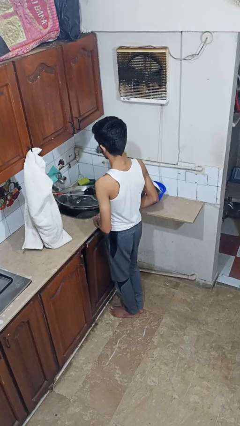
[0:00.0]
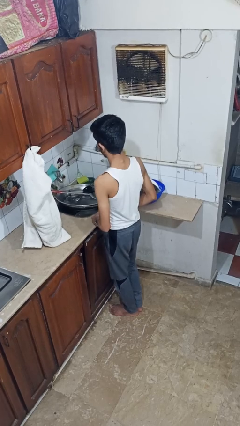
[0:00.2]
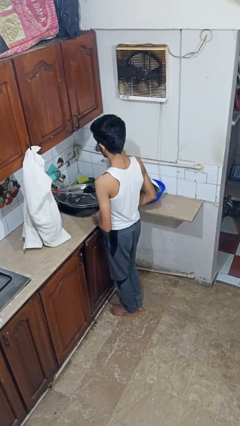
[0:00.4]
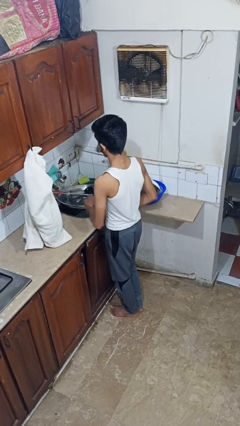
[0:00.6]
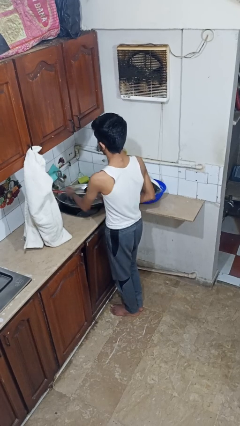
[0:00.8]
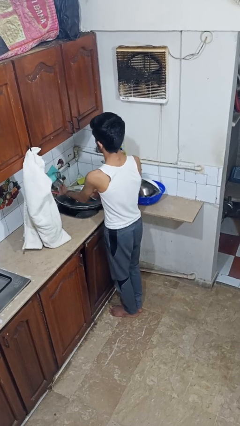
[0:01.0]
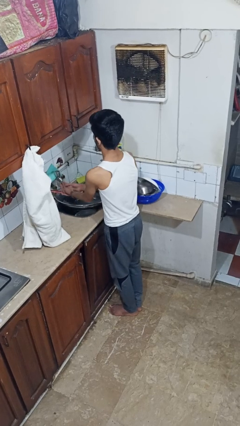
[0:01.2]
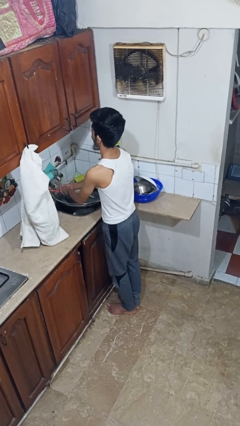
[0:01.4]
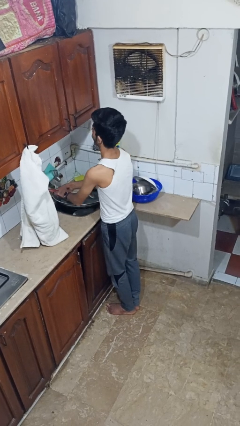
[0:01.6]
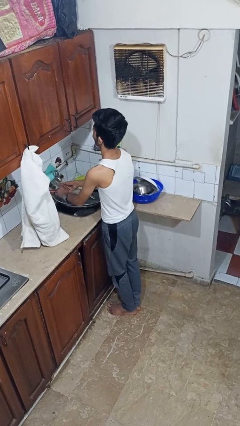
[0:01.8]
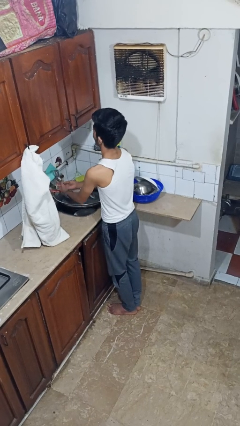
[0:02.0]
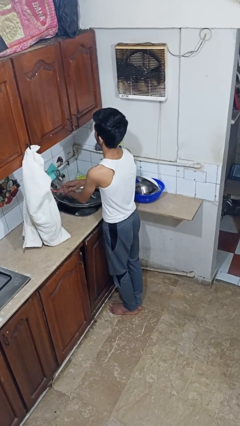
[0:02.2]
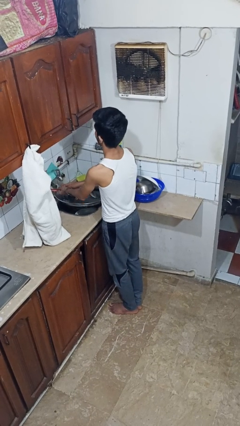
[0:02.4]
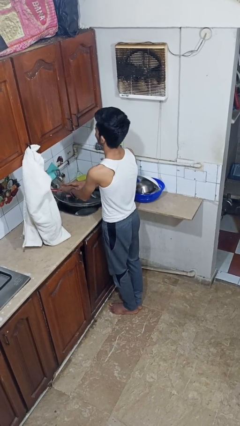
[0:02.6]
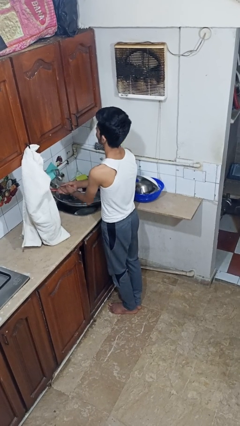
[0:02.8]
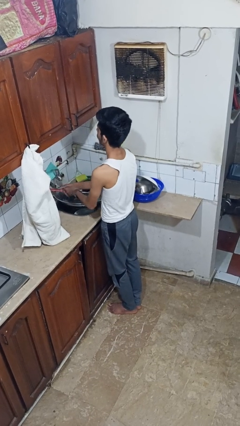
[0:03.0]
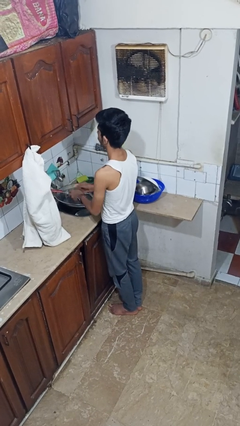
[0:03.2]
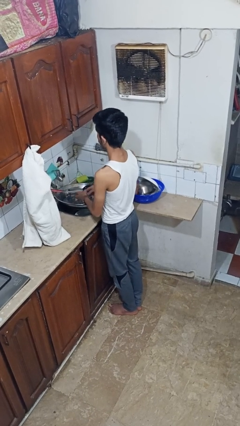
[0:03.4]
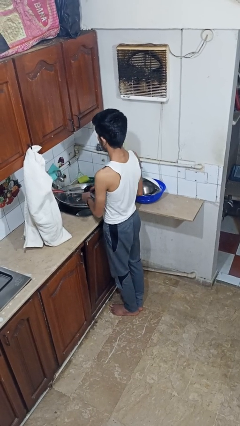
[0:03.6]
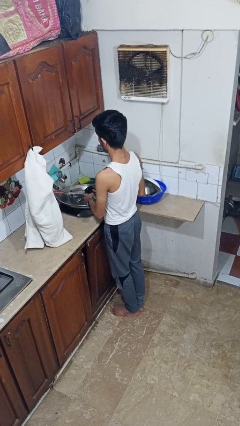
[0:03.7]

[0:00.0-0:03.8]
person washes hands

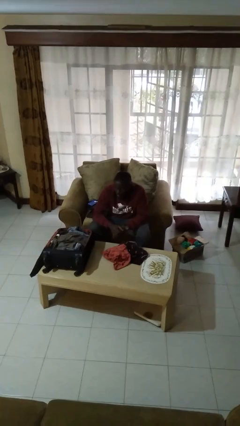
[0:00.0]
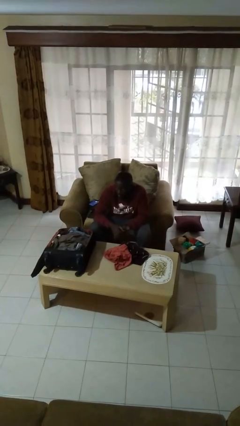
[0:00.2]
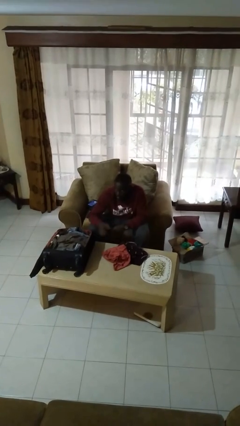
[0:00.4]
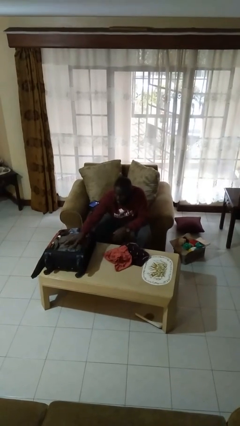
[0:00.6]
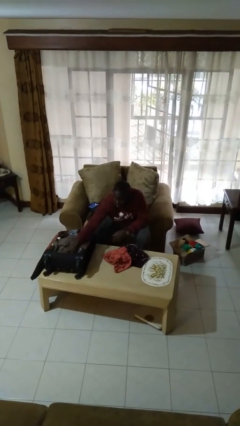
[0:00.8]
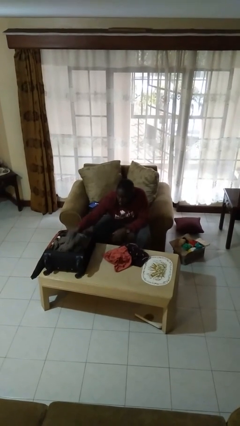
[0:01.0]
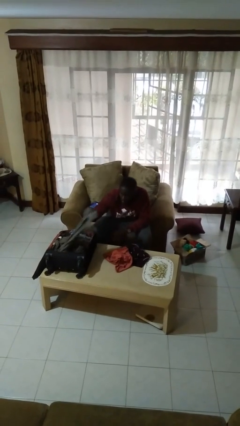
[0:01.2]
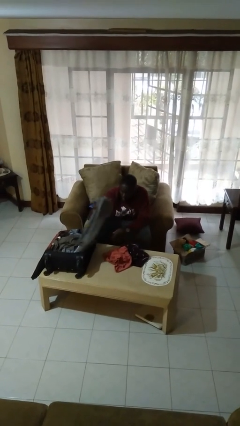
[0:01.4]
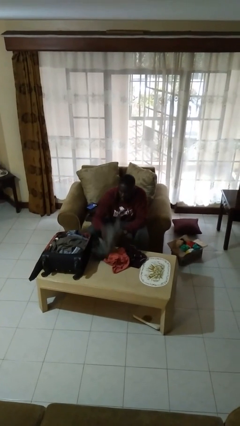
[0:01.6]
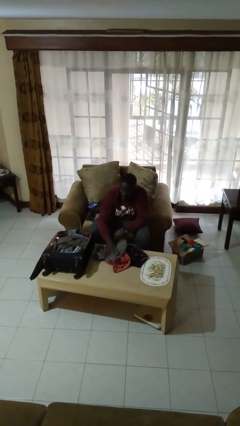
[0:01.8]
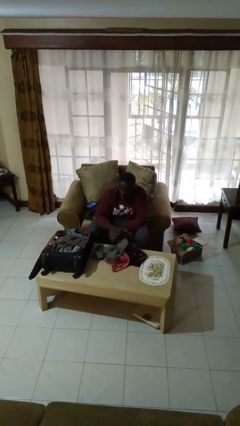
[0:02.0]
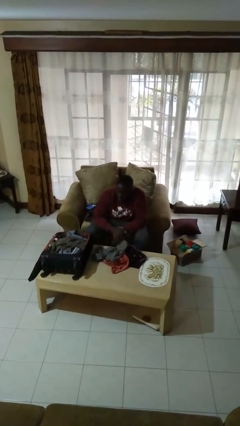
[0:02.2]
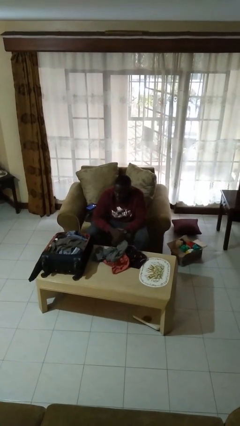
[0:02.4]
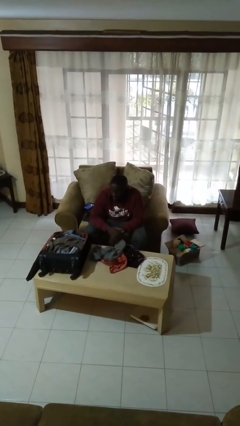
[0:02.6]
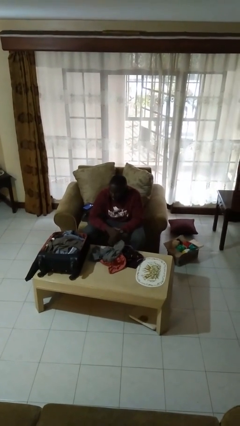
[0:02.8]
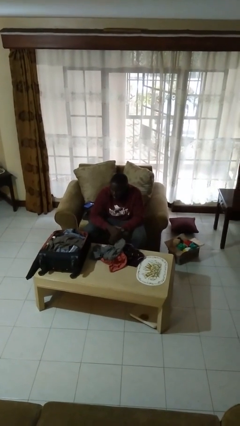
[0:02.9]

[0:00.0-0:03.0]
person unloads clothes from suitcase

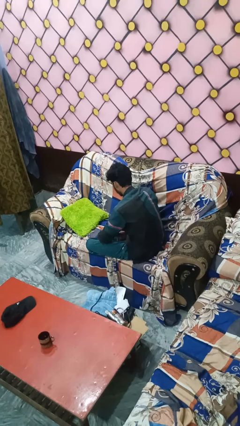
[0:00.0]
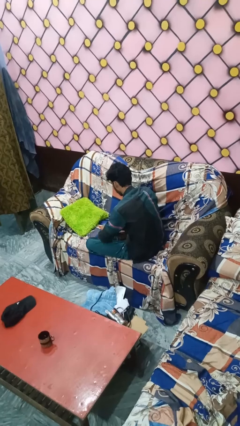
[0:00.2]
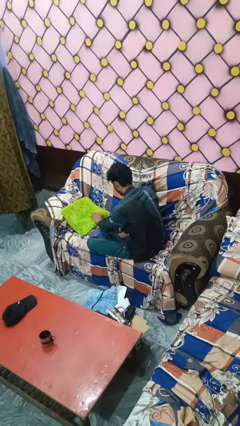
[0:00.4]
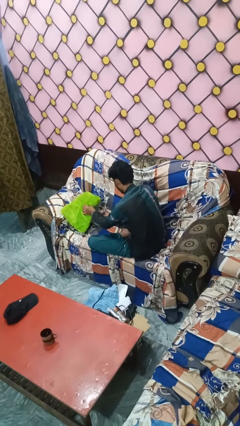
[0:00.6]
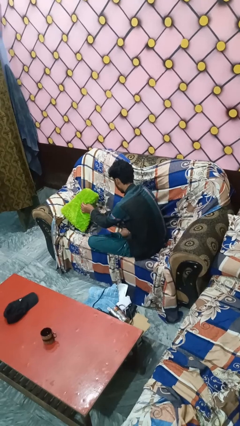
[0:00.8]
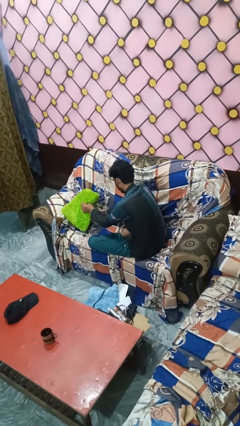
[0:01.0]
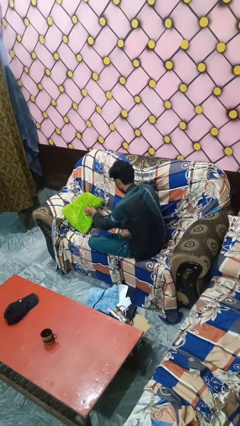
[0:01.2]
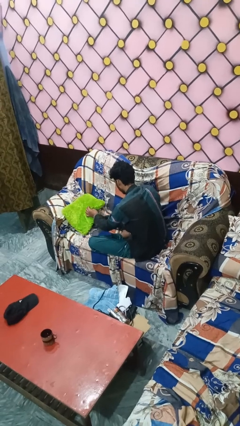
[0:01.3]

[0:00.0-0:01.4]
person searches under couch

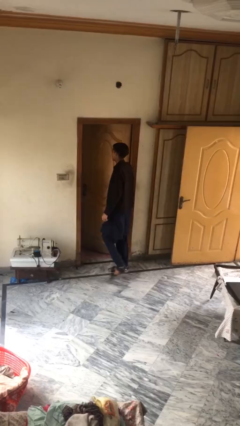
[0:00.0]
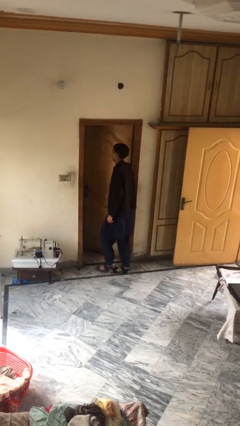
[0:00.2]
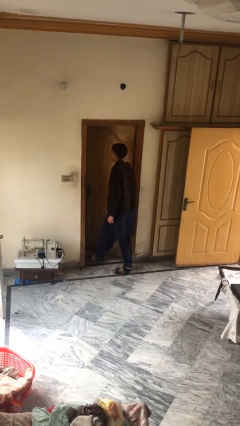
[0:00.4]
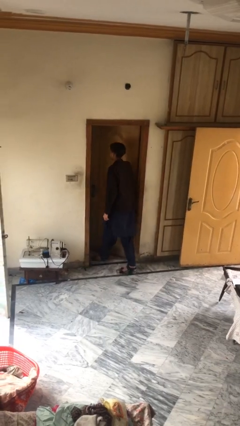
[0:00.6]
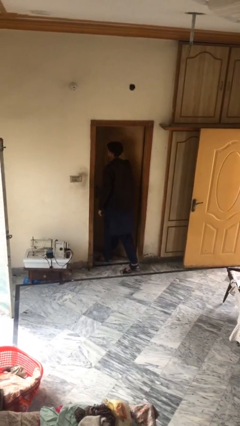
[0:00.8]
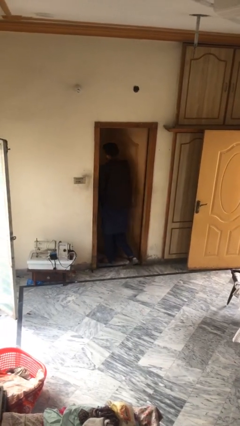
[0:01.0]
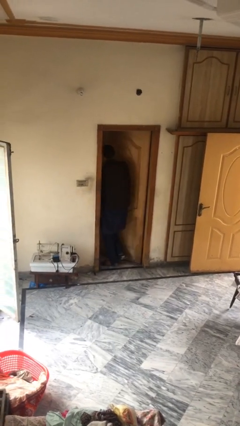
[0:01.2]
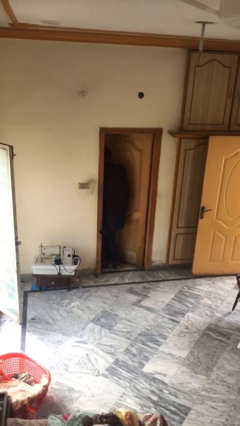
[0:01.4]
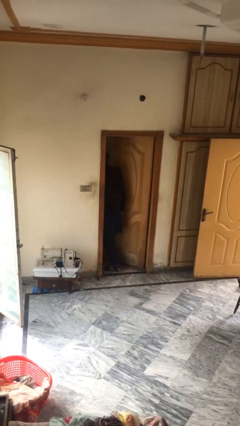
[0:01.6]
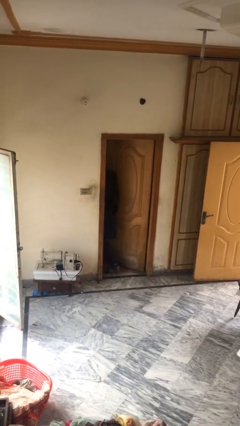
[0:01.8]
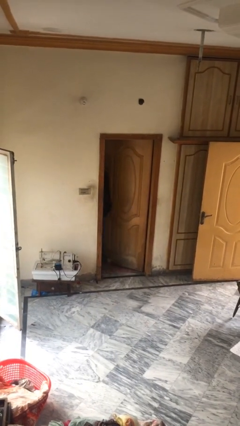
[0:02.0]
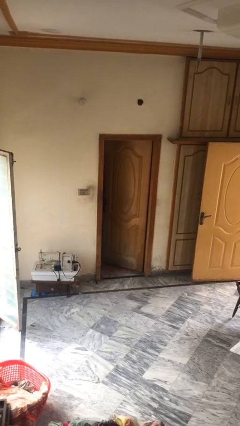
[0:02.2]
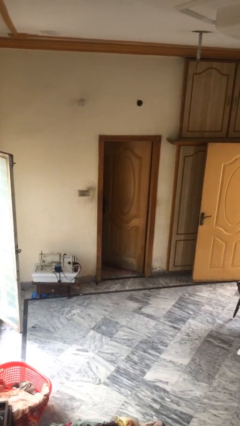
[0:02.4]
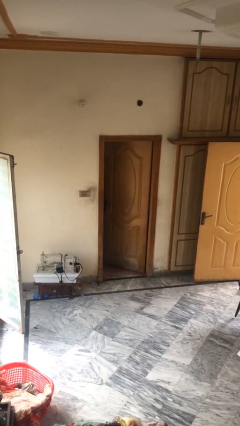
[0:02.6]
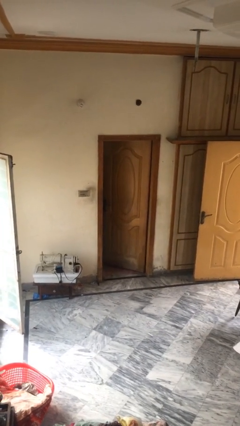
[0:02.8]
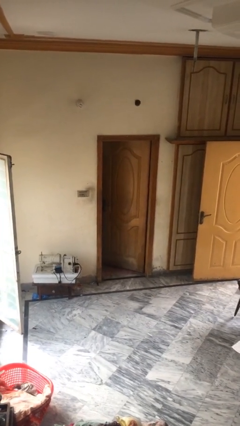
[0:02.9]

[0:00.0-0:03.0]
person exits scene through structure

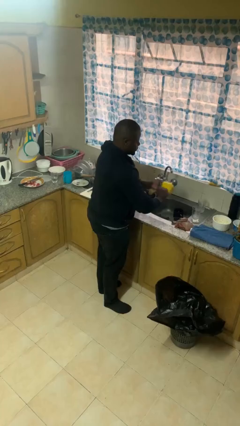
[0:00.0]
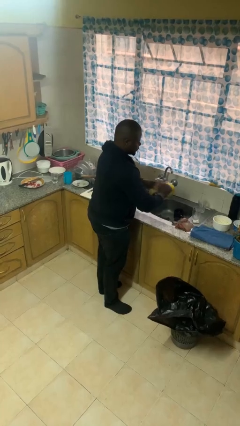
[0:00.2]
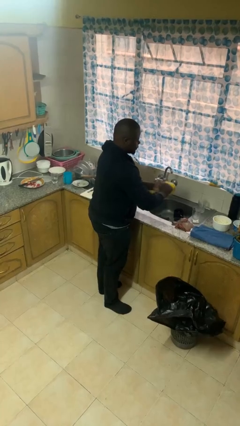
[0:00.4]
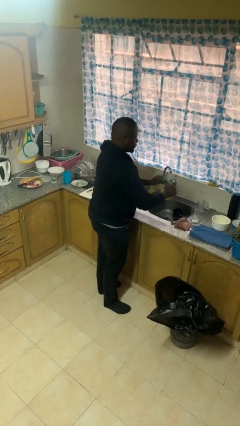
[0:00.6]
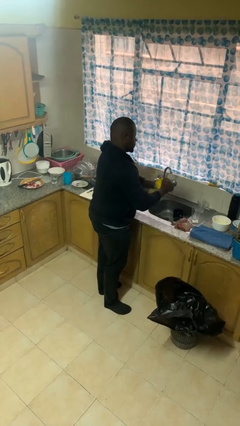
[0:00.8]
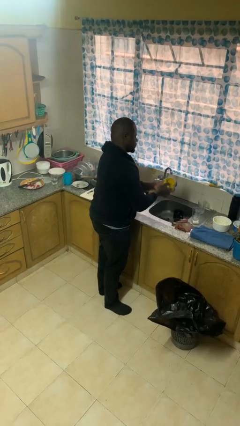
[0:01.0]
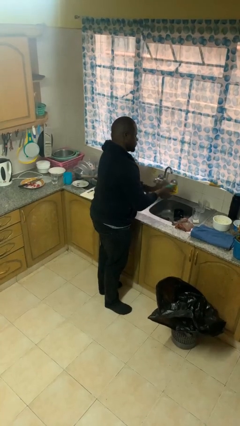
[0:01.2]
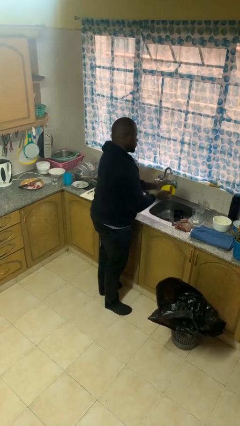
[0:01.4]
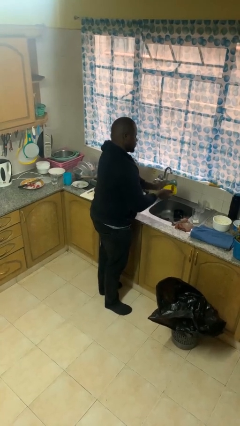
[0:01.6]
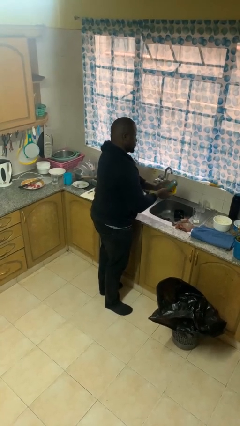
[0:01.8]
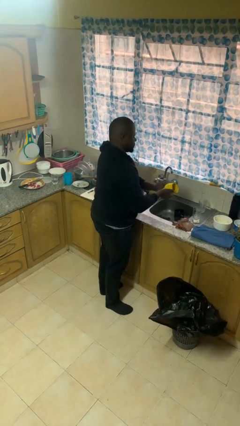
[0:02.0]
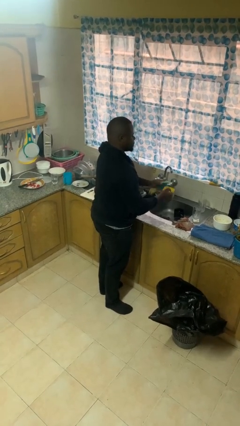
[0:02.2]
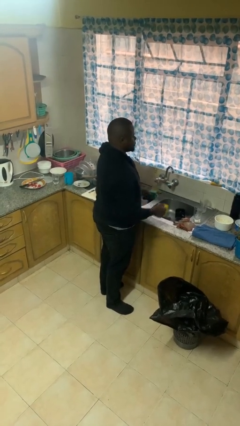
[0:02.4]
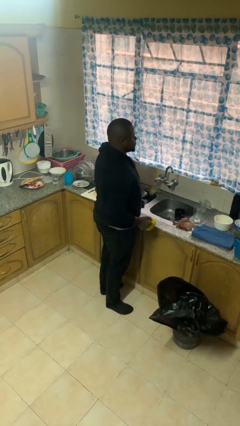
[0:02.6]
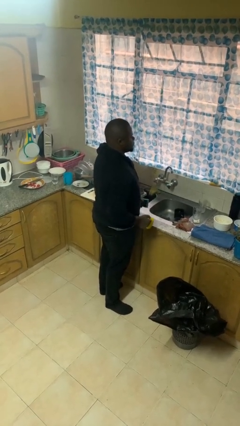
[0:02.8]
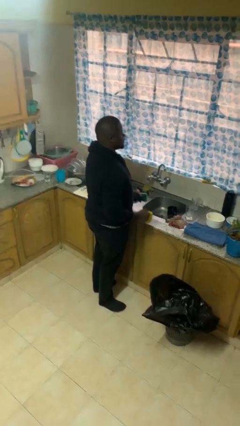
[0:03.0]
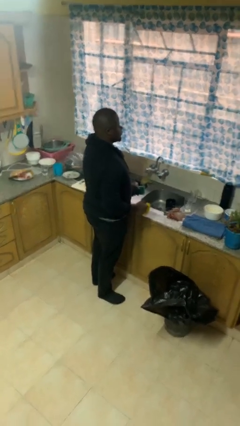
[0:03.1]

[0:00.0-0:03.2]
person washes dish

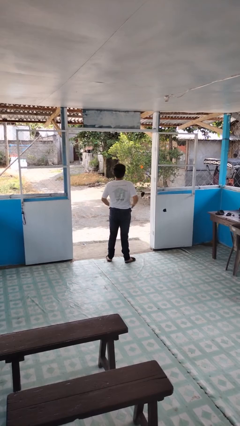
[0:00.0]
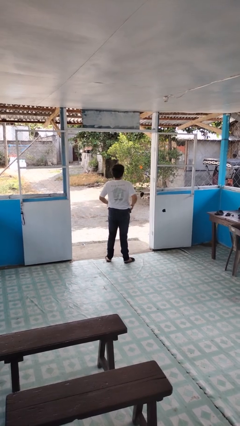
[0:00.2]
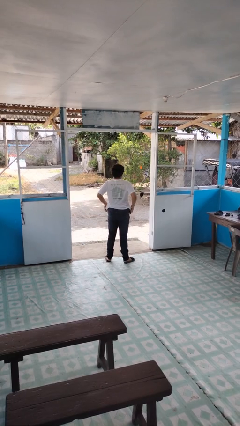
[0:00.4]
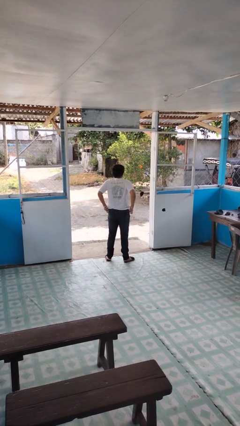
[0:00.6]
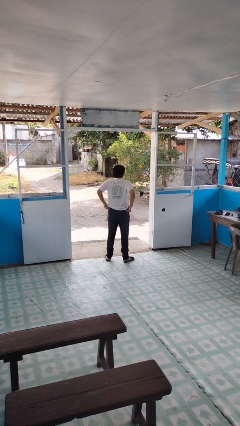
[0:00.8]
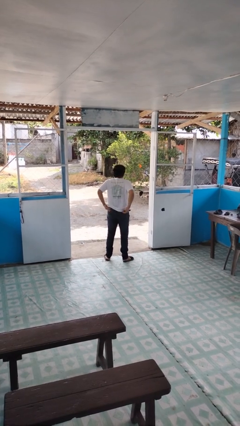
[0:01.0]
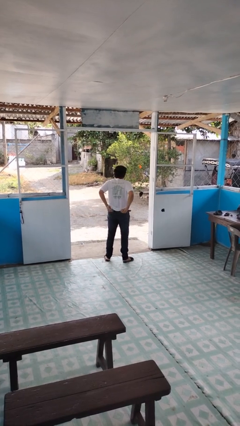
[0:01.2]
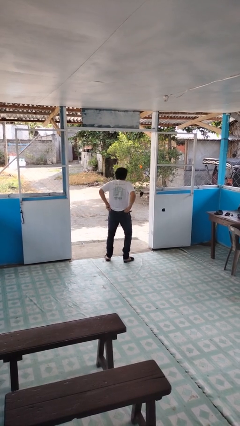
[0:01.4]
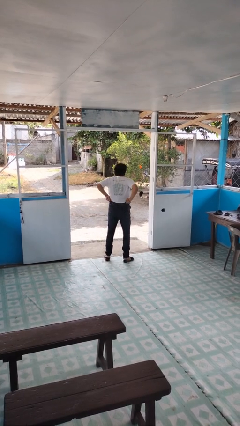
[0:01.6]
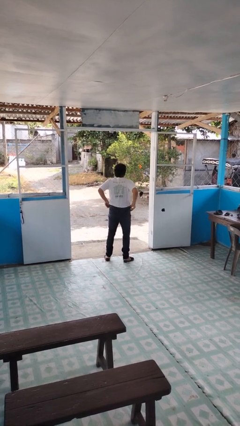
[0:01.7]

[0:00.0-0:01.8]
person hikes up pants

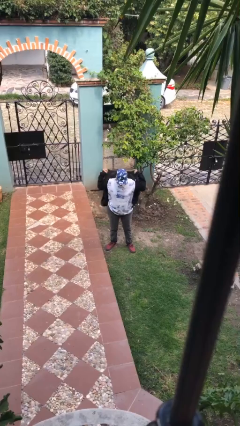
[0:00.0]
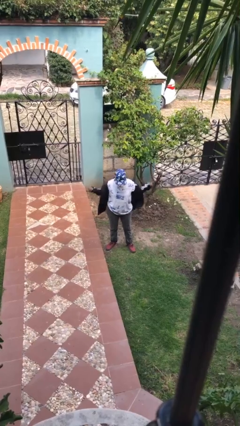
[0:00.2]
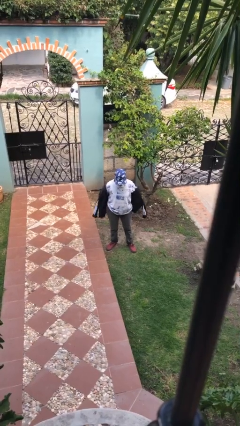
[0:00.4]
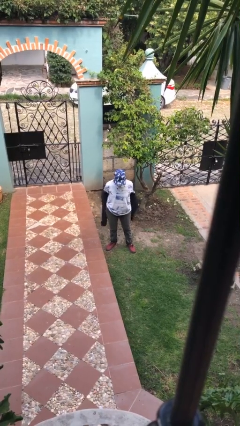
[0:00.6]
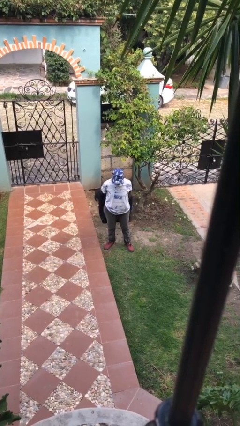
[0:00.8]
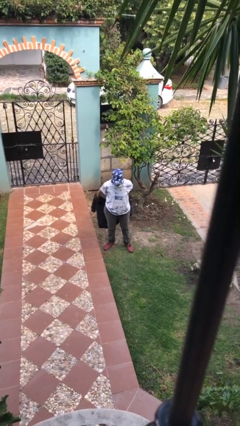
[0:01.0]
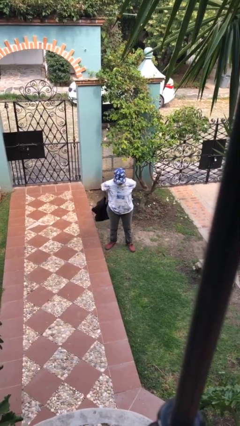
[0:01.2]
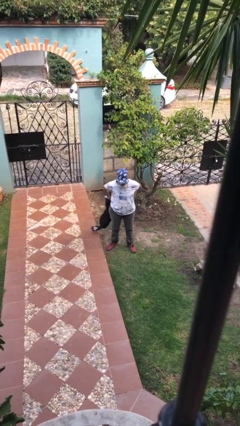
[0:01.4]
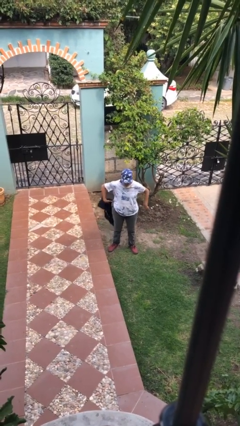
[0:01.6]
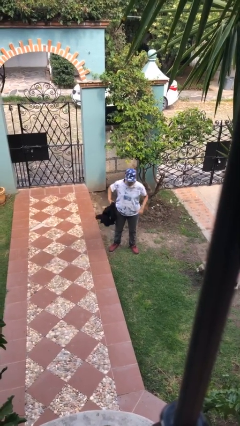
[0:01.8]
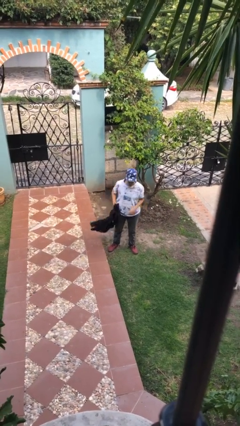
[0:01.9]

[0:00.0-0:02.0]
person takes off jacket
